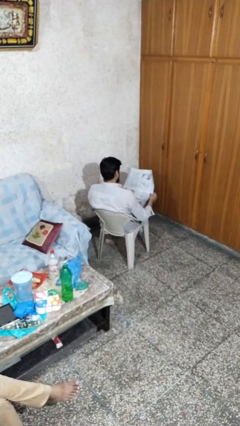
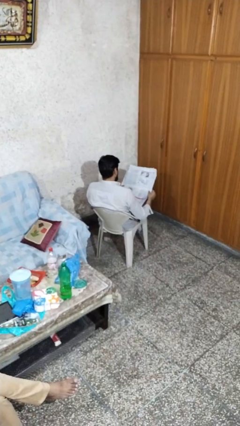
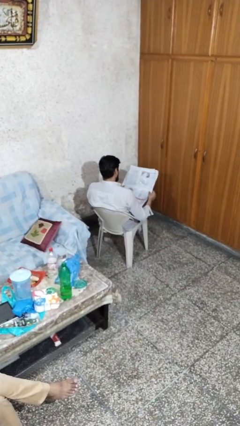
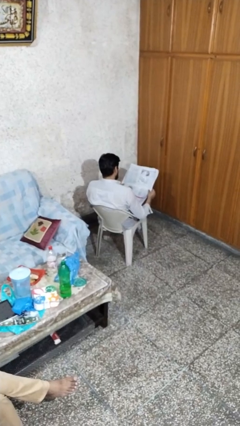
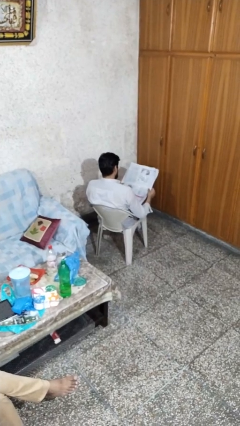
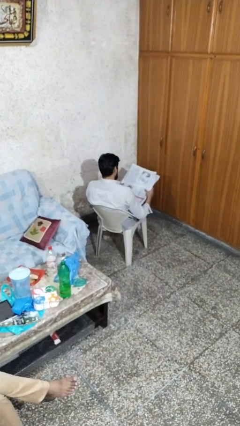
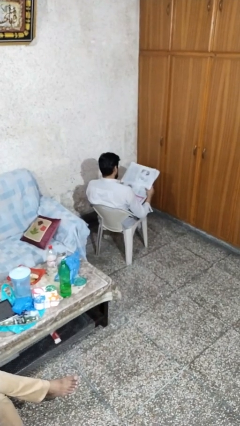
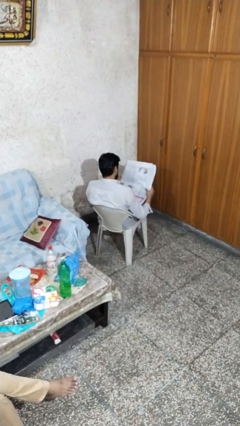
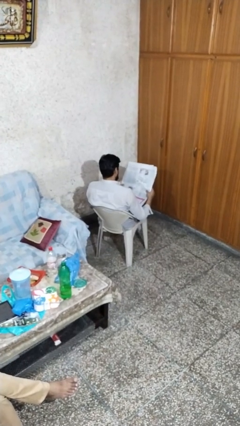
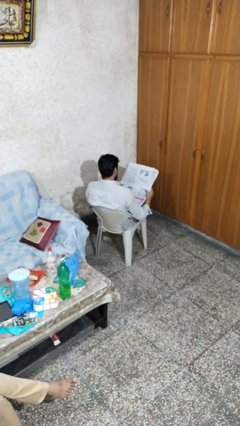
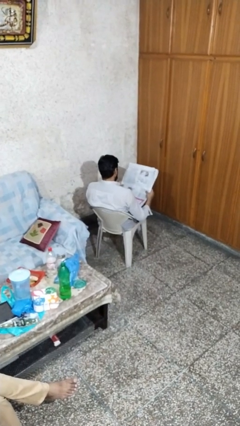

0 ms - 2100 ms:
person reads newspaper

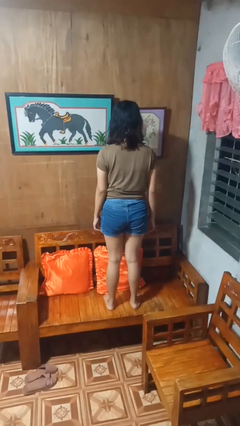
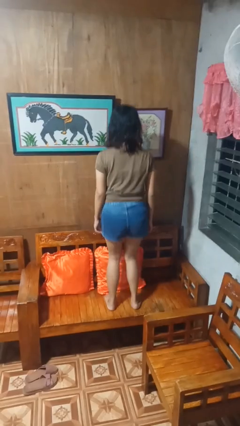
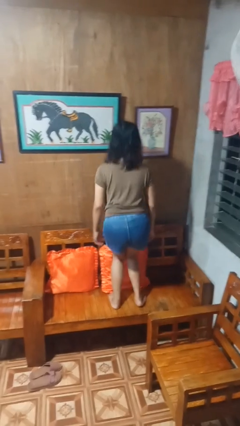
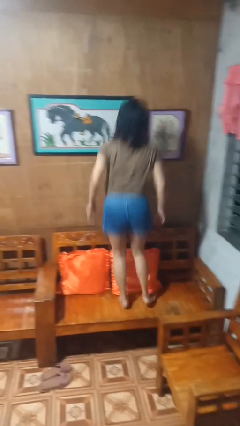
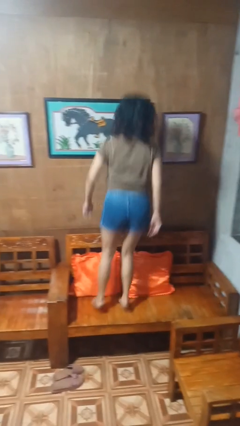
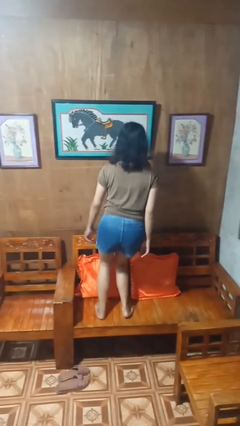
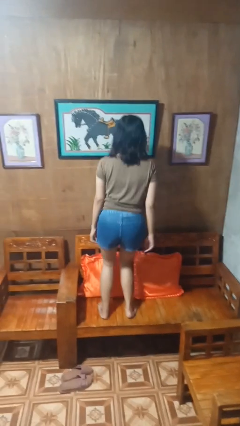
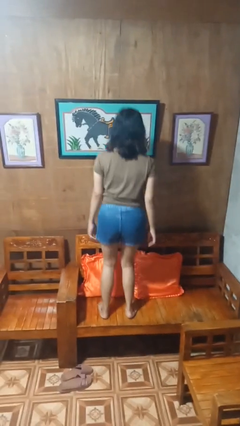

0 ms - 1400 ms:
person jumps on couch

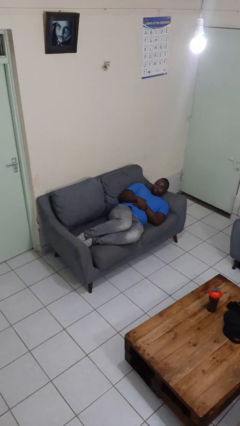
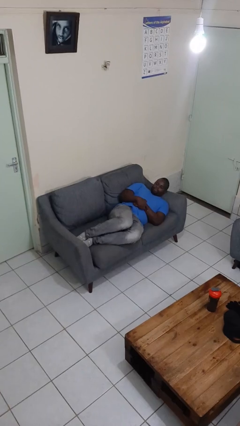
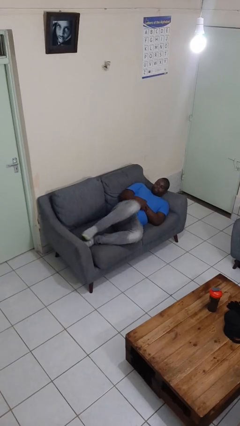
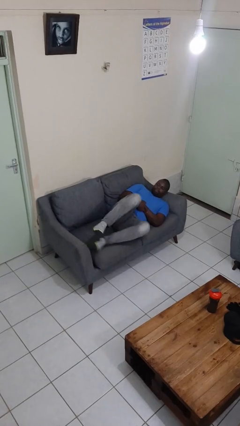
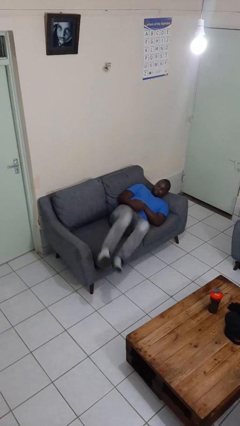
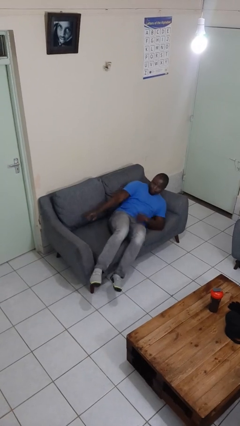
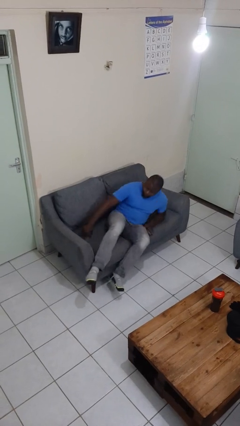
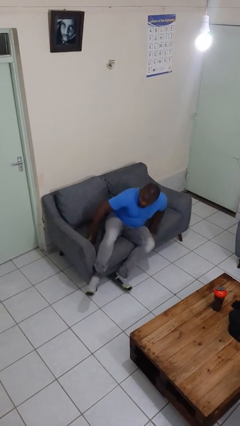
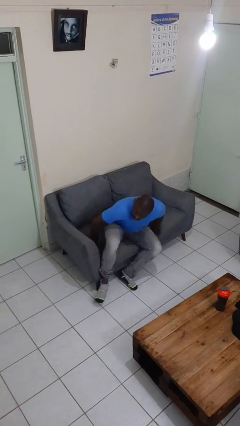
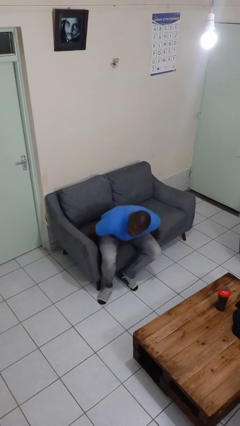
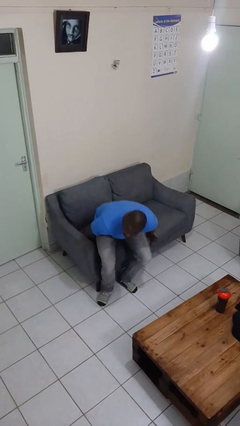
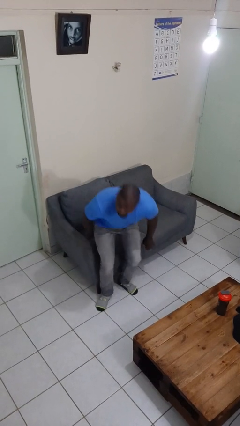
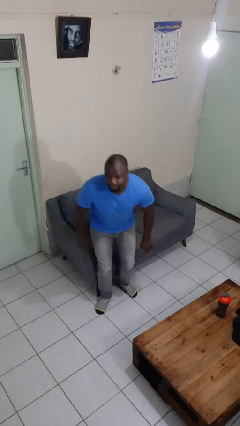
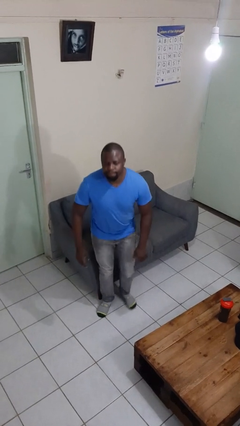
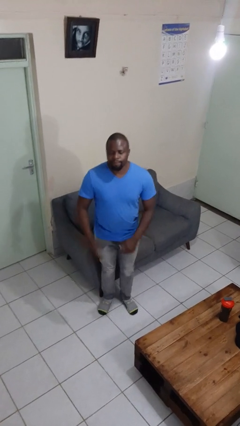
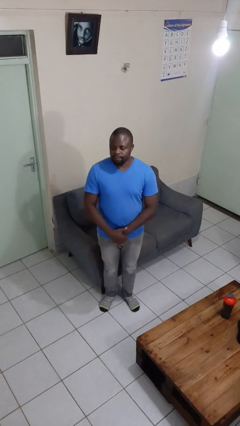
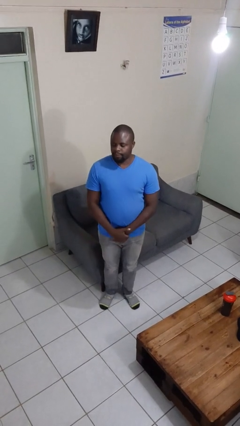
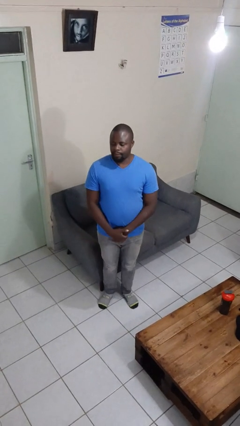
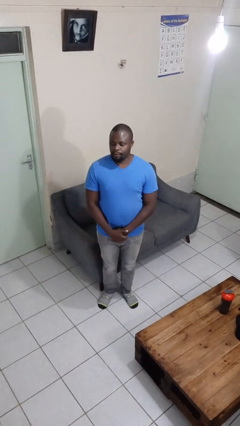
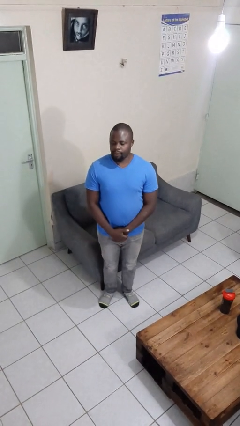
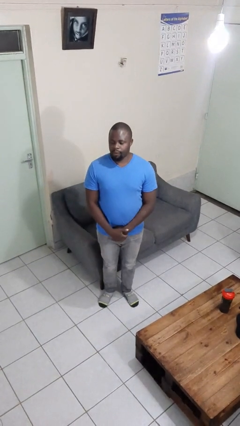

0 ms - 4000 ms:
person stands up

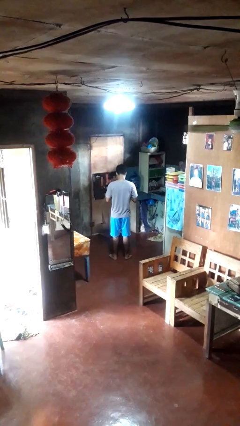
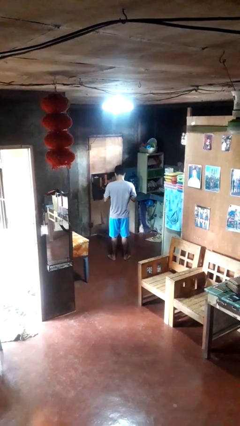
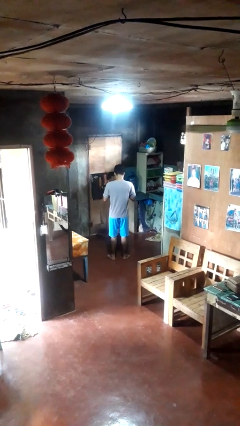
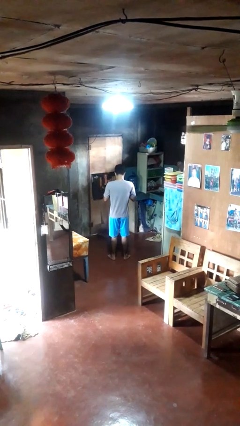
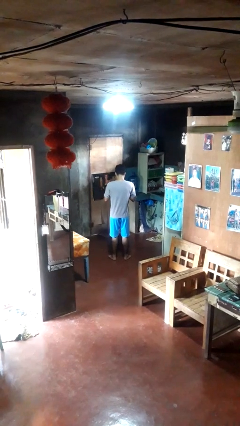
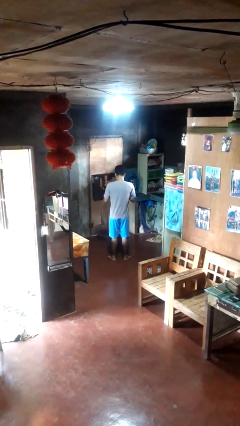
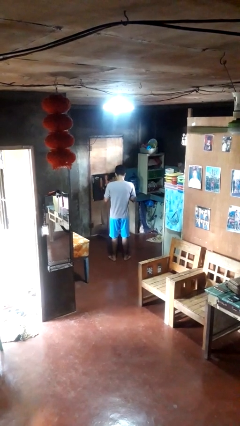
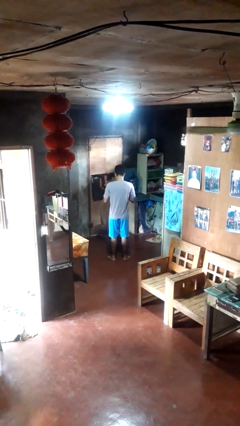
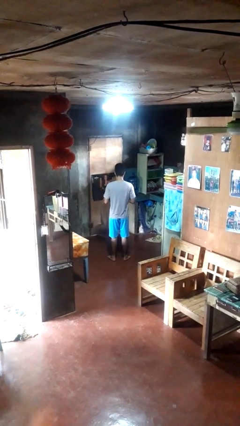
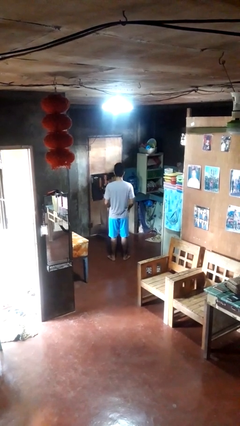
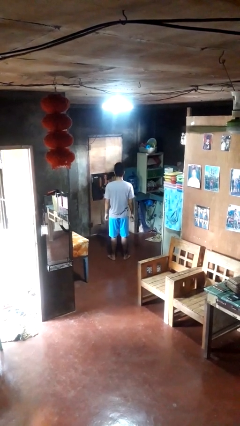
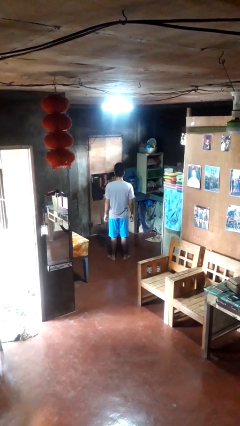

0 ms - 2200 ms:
person buttons shirt

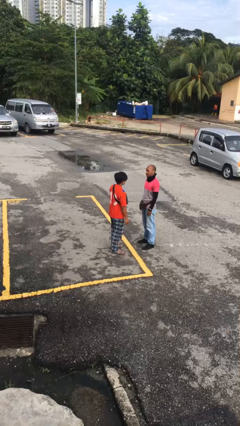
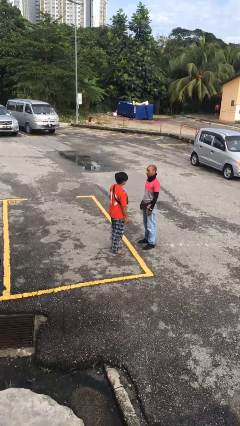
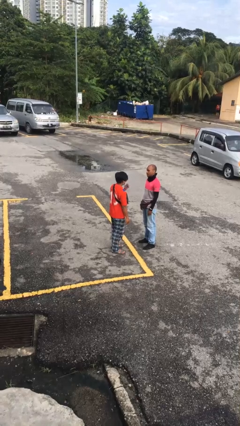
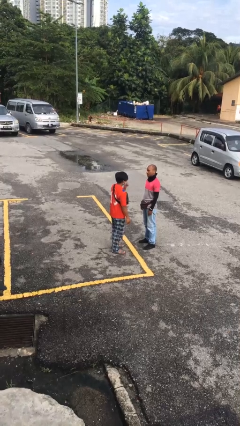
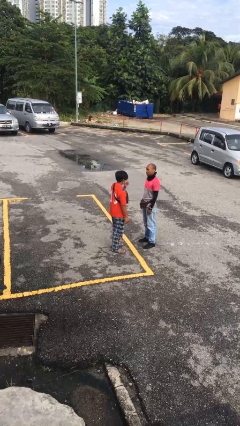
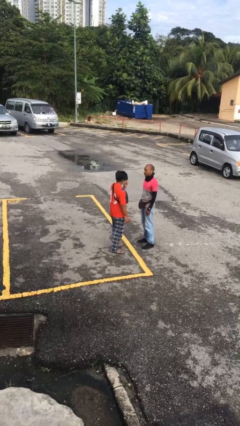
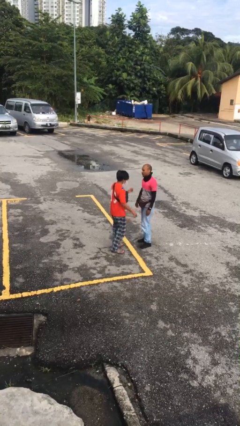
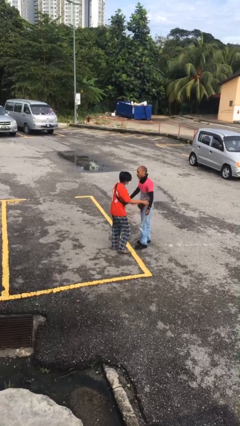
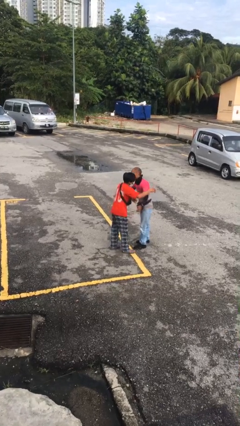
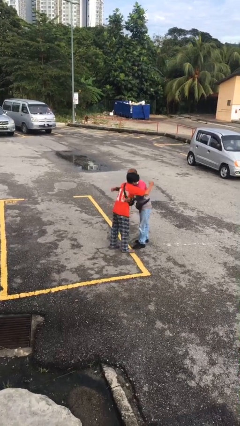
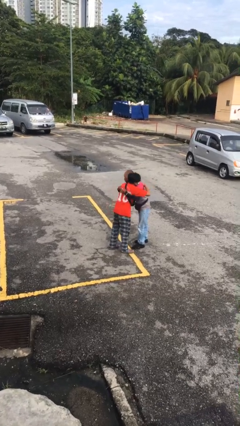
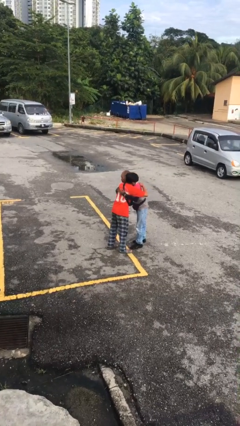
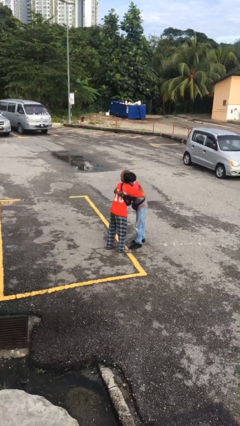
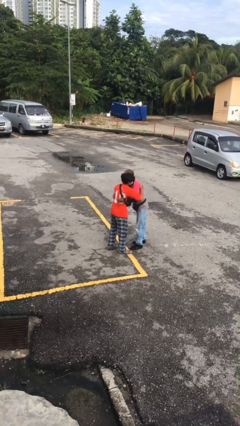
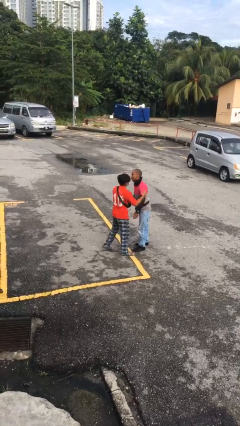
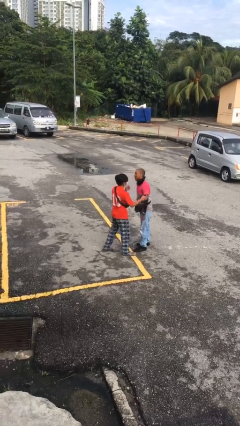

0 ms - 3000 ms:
person embraces person

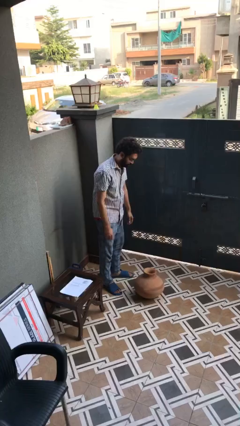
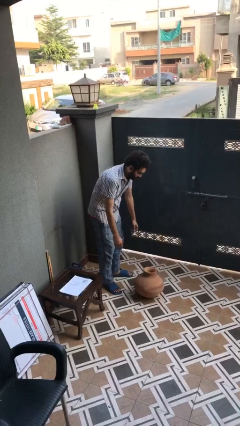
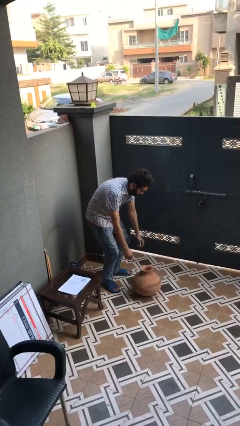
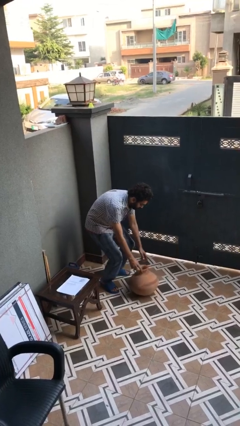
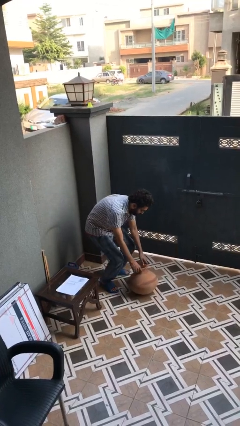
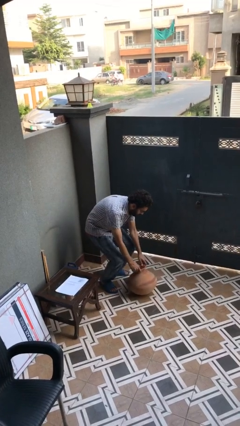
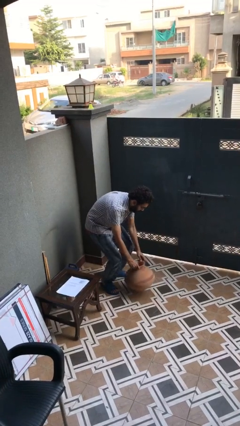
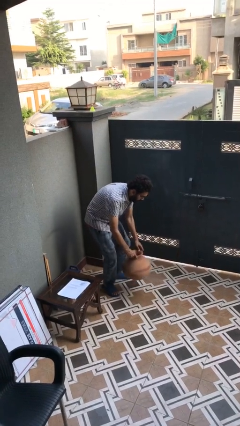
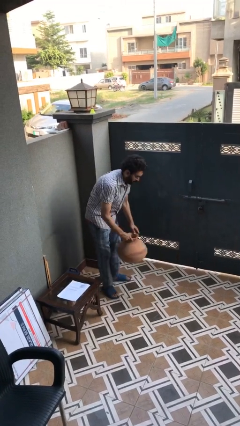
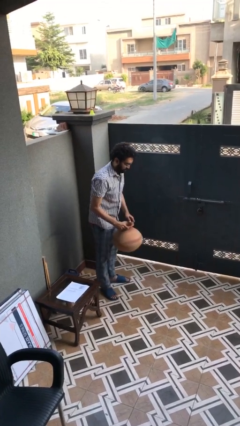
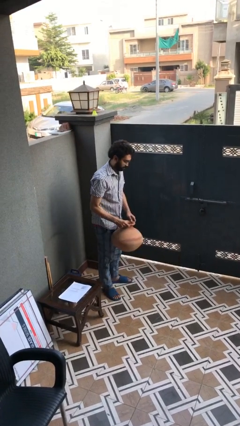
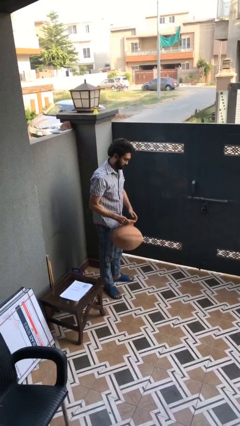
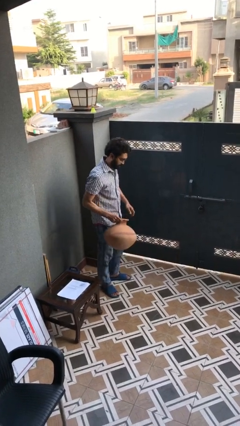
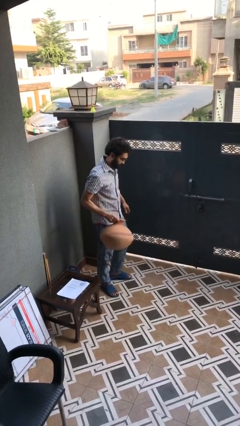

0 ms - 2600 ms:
person picks up object from floor

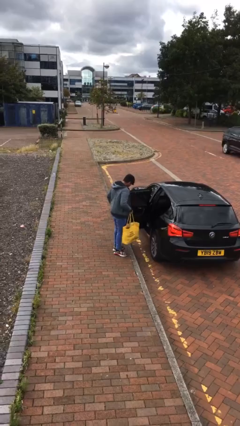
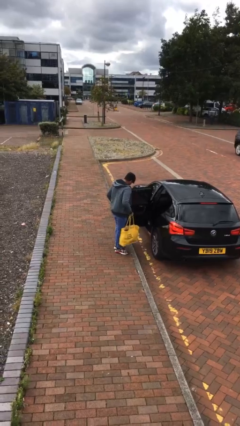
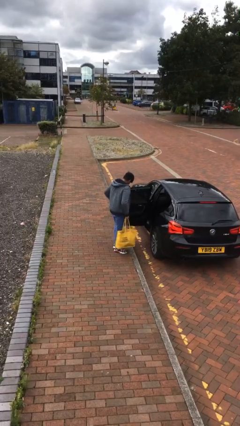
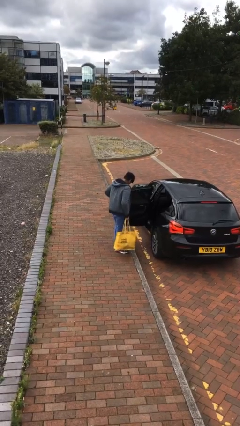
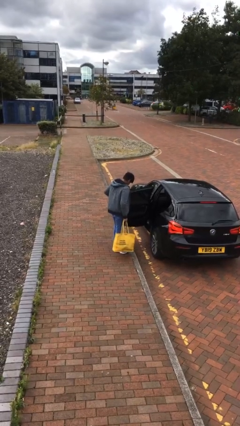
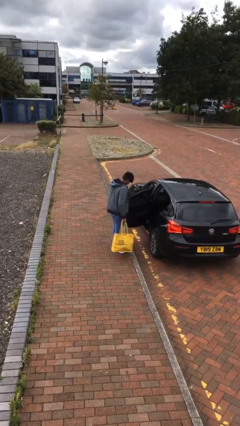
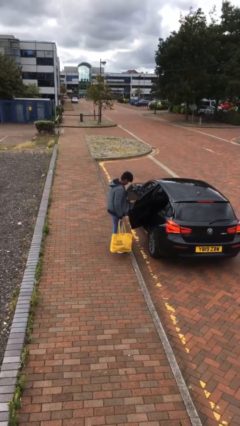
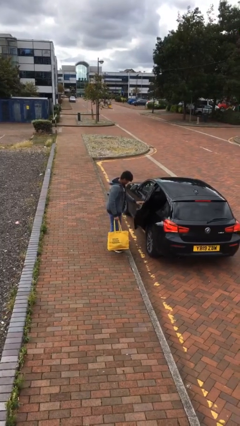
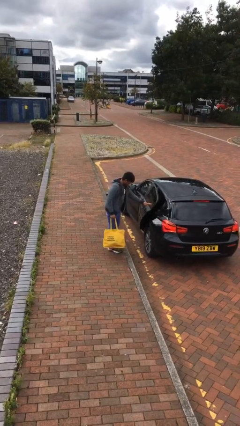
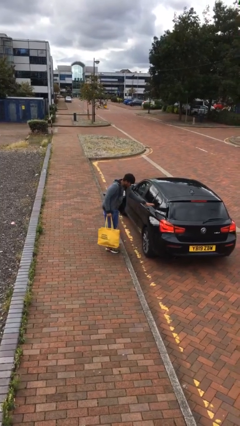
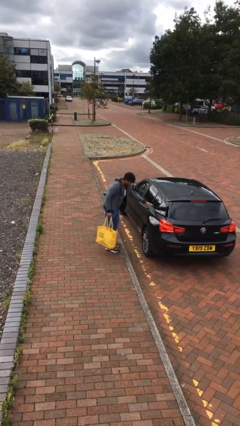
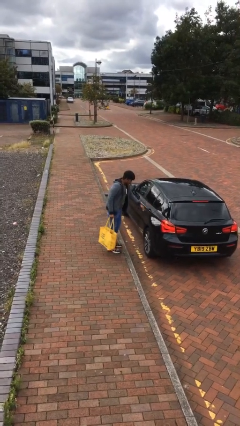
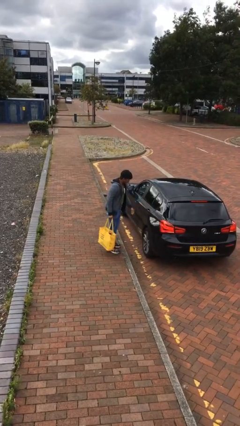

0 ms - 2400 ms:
person closes car door
